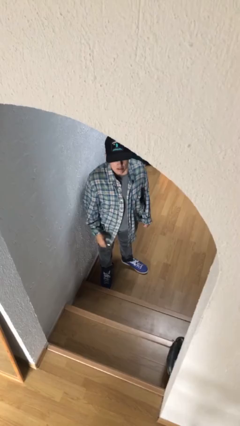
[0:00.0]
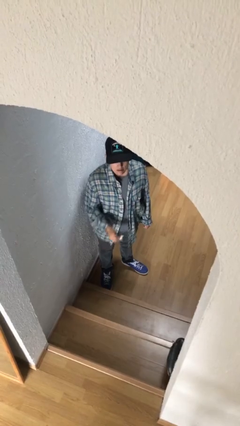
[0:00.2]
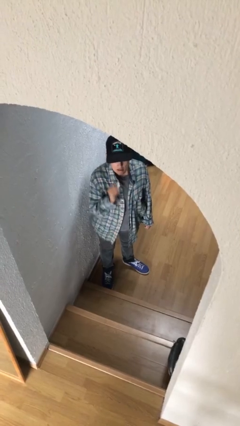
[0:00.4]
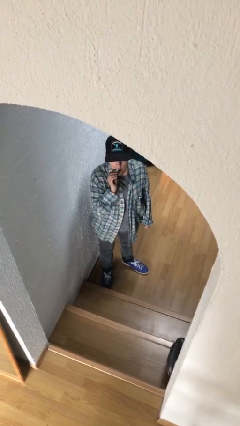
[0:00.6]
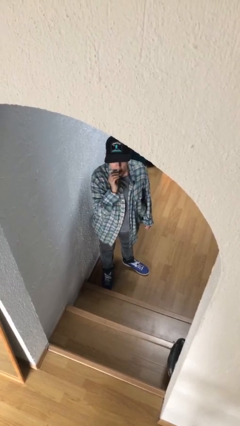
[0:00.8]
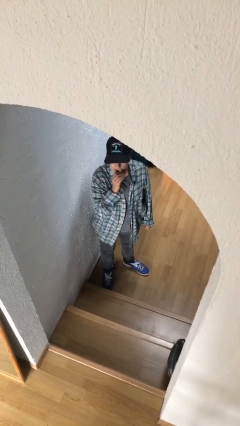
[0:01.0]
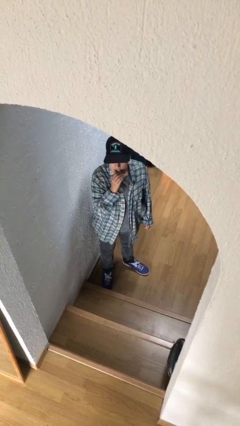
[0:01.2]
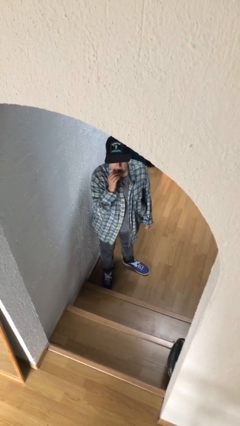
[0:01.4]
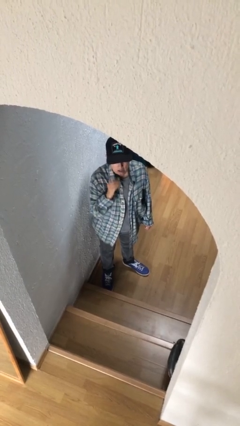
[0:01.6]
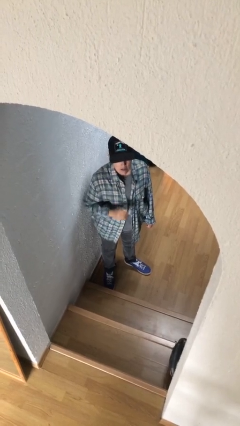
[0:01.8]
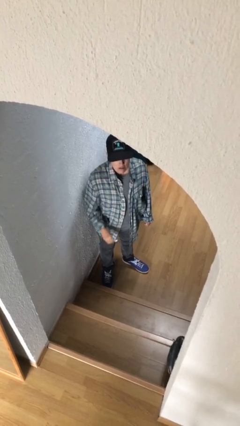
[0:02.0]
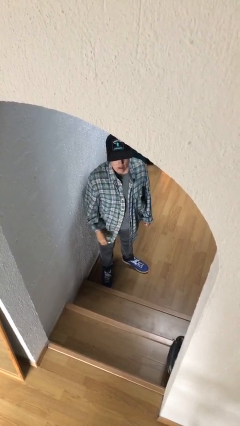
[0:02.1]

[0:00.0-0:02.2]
person applies lip makeup

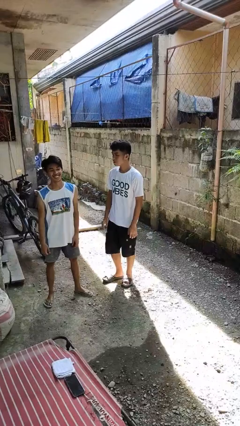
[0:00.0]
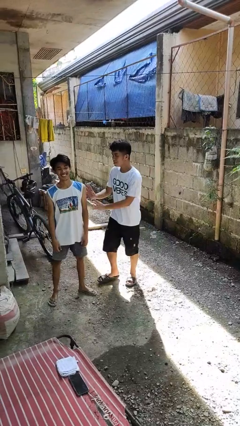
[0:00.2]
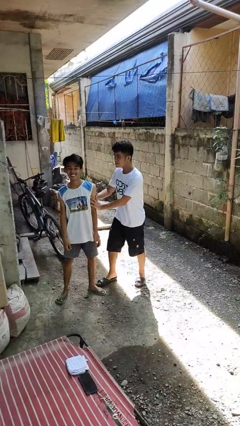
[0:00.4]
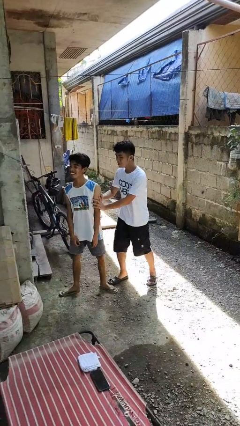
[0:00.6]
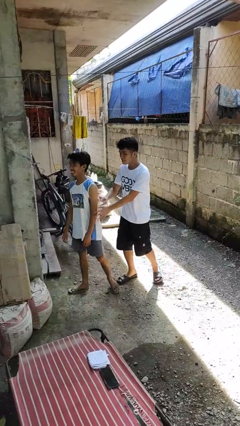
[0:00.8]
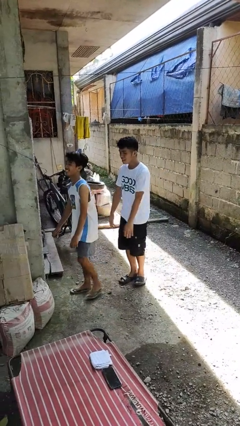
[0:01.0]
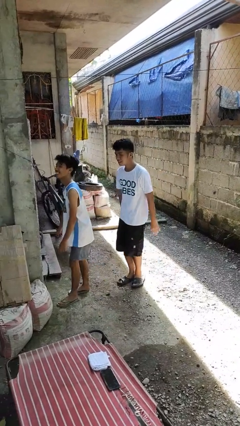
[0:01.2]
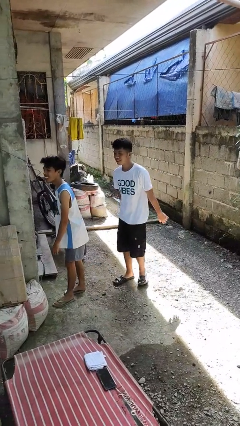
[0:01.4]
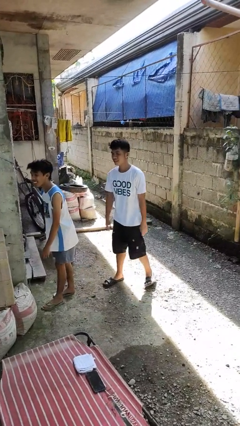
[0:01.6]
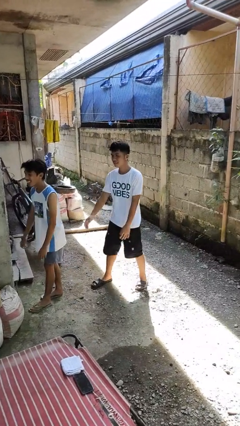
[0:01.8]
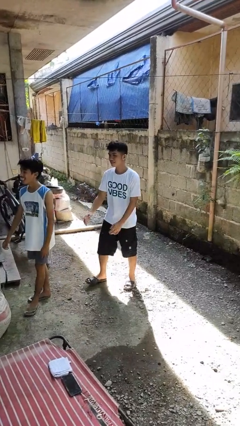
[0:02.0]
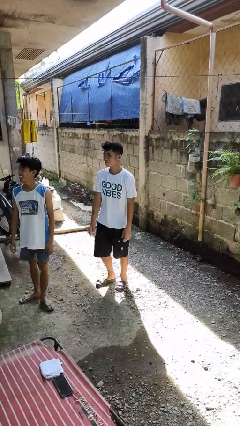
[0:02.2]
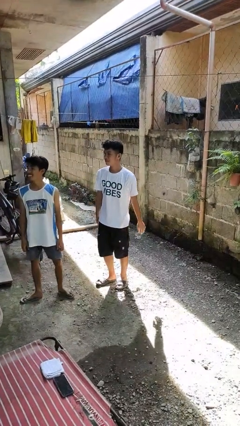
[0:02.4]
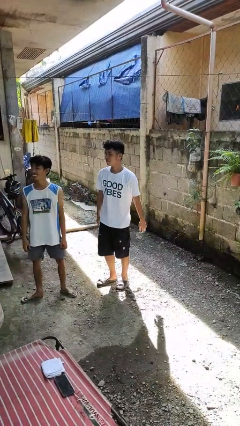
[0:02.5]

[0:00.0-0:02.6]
person shoves person

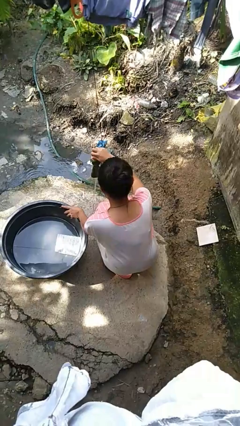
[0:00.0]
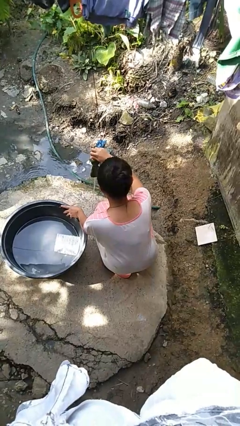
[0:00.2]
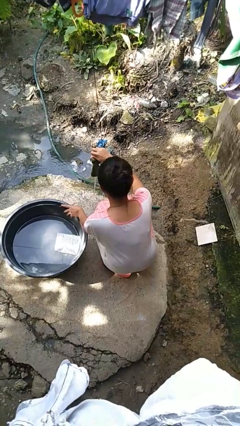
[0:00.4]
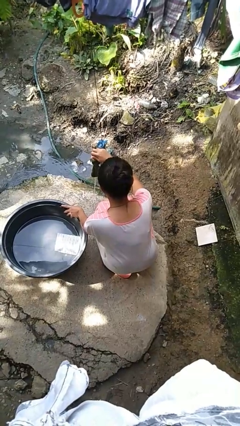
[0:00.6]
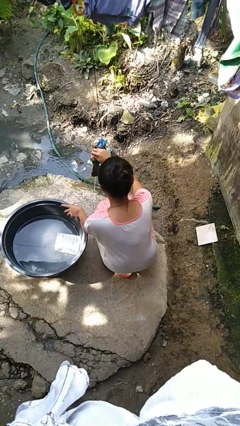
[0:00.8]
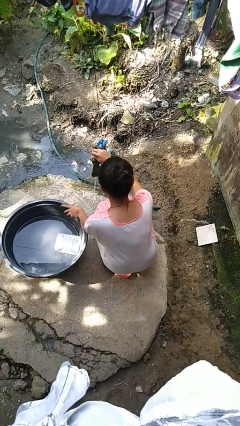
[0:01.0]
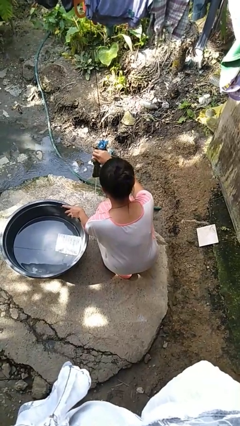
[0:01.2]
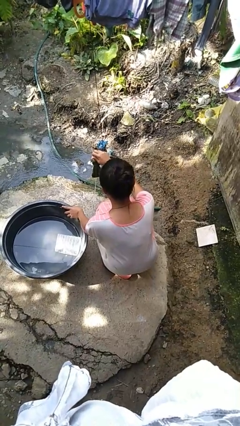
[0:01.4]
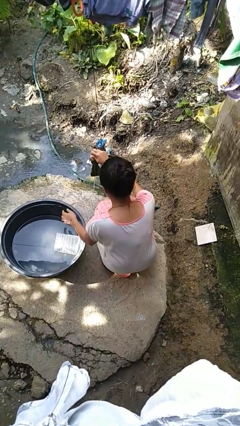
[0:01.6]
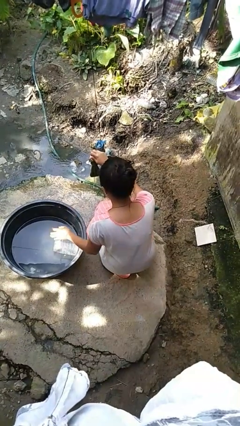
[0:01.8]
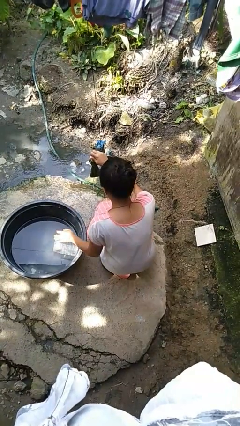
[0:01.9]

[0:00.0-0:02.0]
person turns off faucet

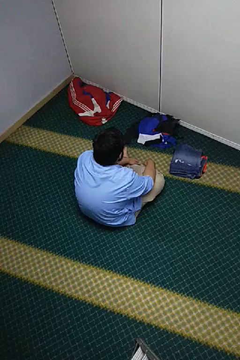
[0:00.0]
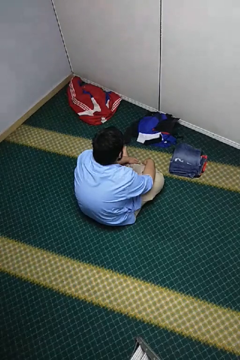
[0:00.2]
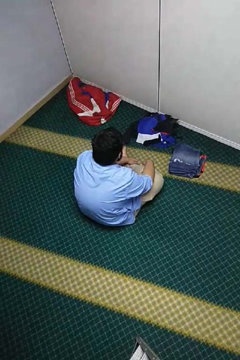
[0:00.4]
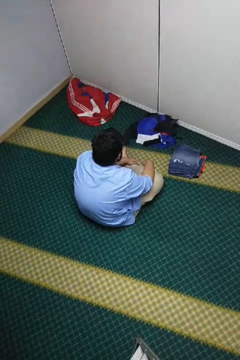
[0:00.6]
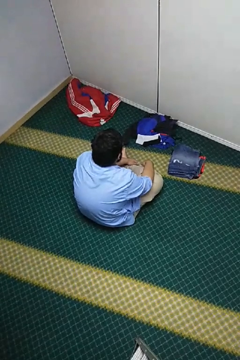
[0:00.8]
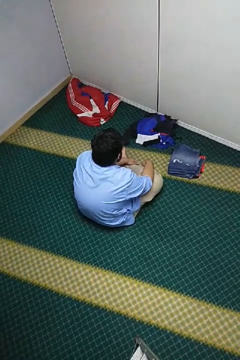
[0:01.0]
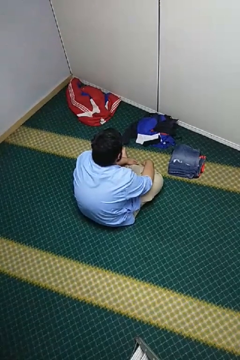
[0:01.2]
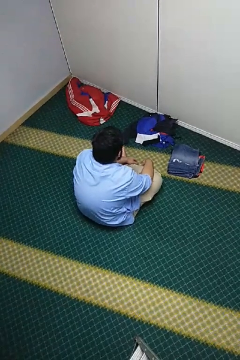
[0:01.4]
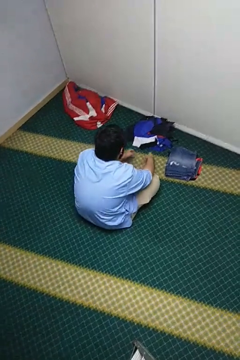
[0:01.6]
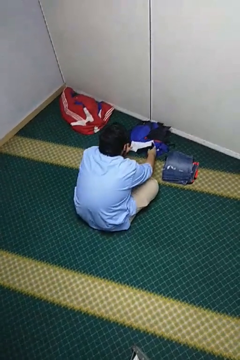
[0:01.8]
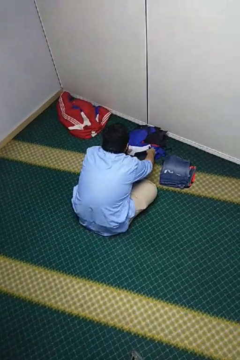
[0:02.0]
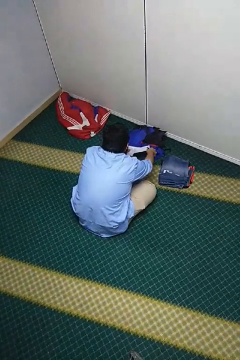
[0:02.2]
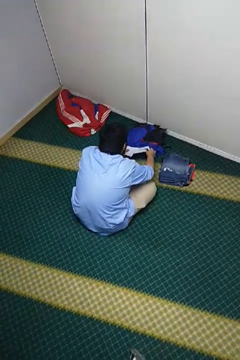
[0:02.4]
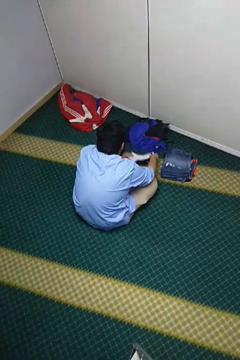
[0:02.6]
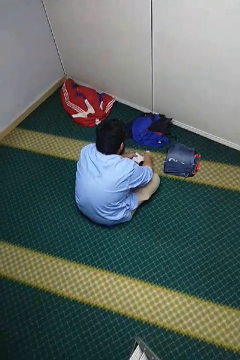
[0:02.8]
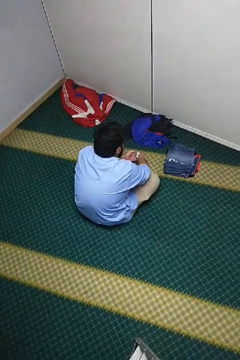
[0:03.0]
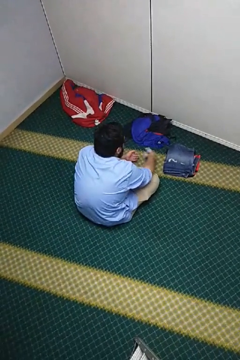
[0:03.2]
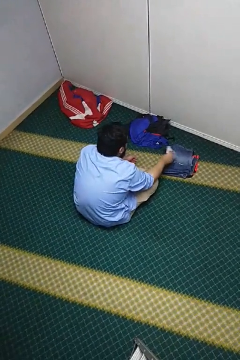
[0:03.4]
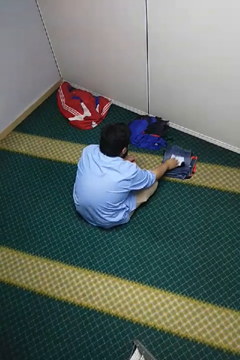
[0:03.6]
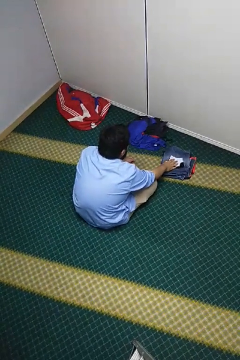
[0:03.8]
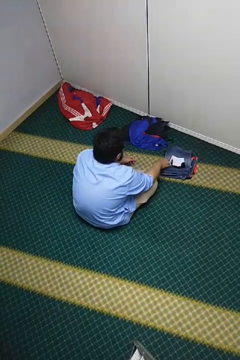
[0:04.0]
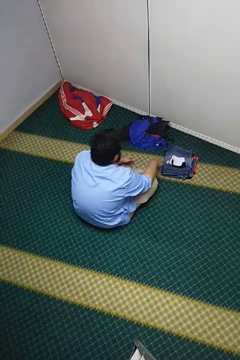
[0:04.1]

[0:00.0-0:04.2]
person folds socks

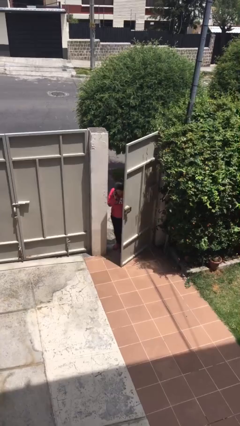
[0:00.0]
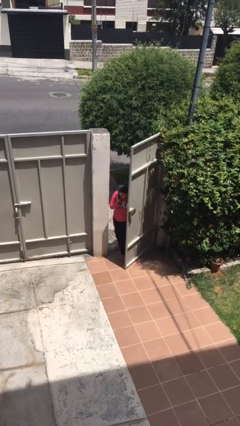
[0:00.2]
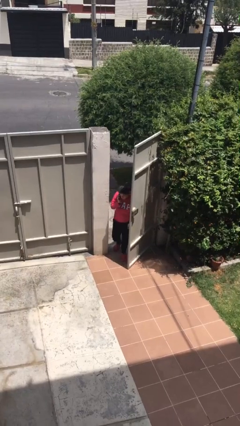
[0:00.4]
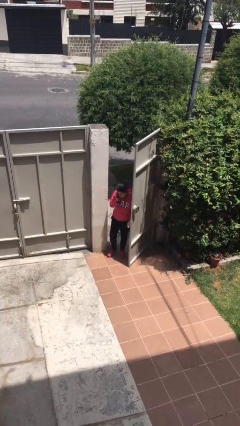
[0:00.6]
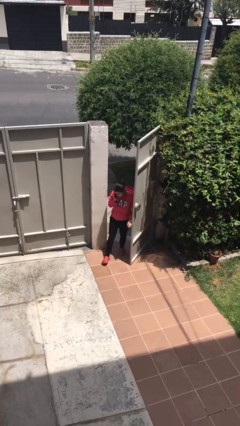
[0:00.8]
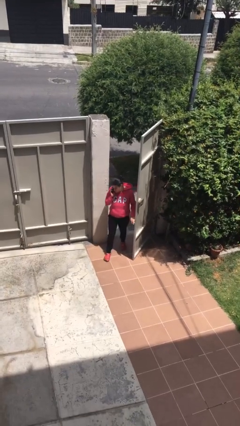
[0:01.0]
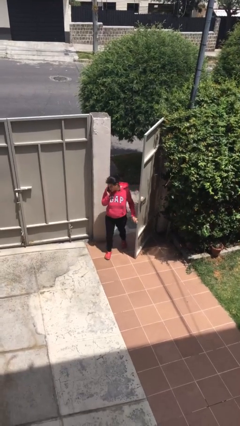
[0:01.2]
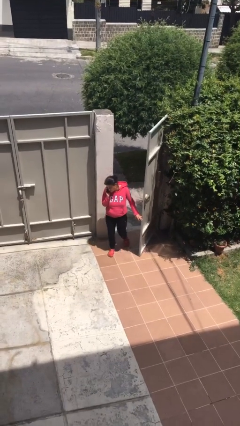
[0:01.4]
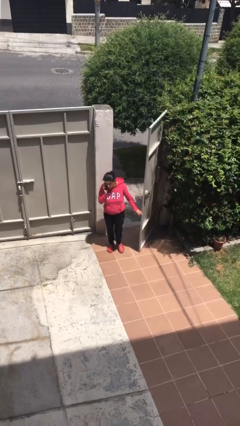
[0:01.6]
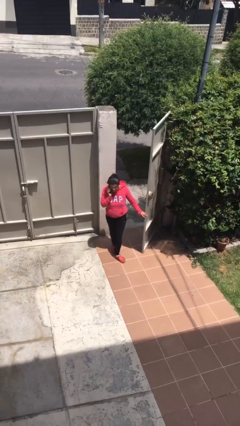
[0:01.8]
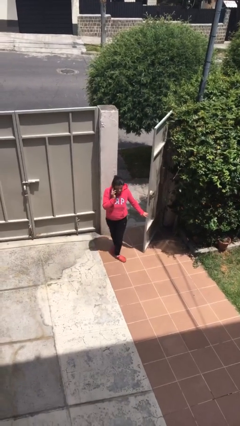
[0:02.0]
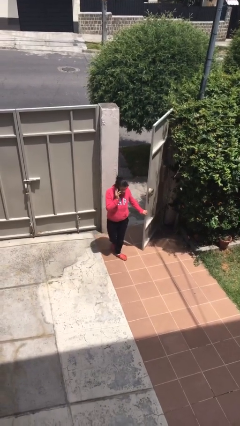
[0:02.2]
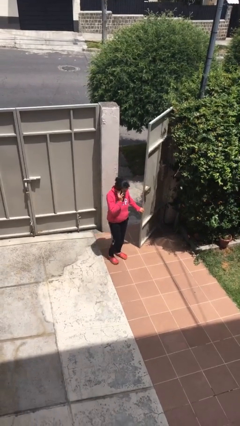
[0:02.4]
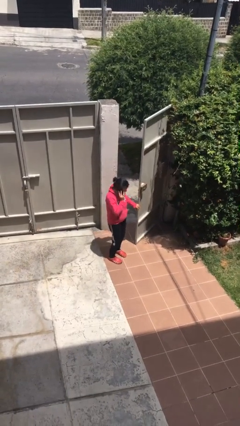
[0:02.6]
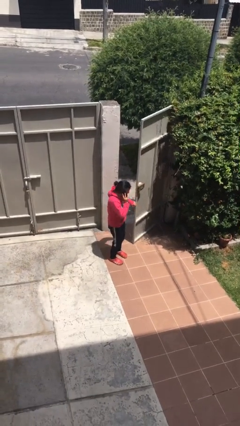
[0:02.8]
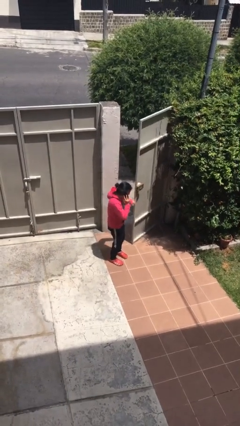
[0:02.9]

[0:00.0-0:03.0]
person enters scene through structure

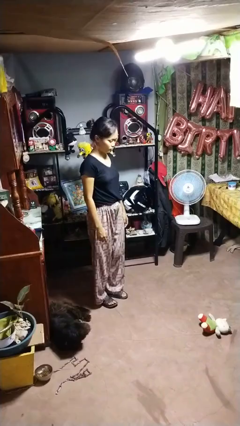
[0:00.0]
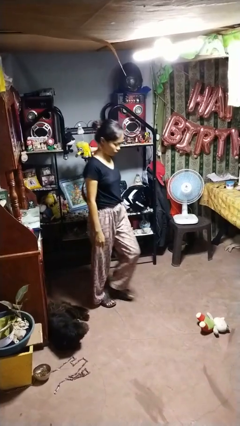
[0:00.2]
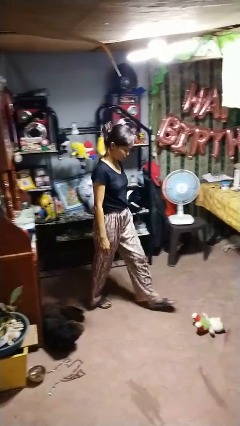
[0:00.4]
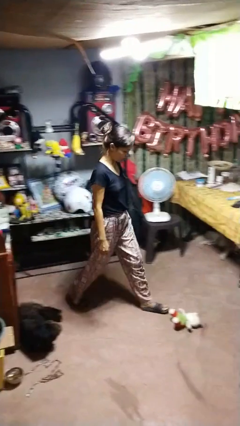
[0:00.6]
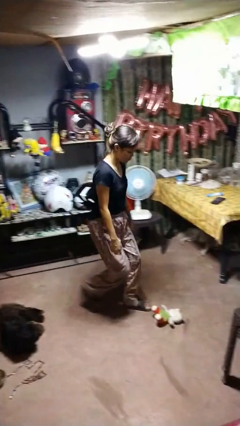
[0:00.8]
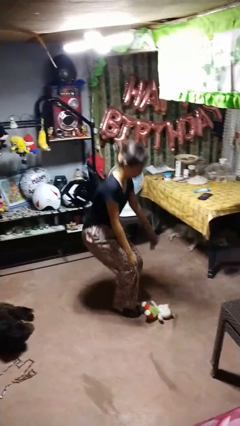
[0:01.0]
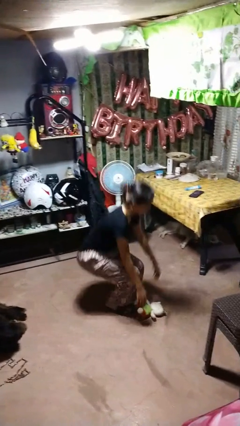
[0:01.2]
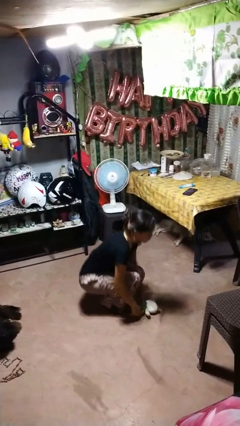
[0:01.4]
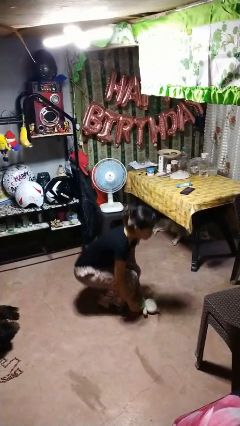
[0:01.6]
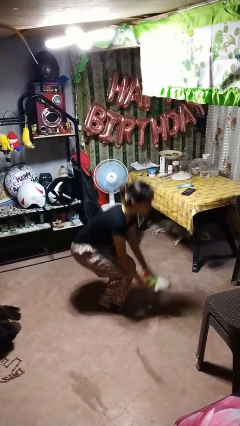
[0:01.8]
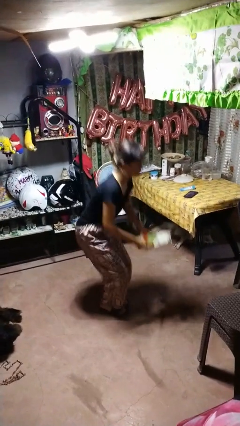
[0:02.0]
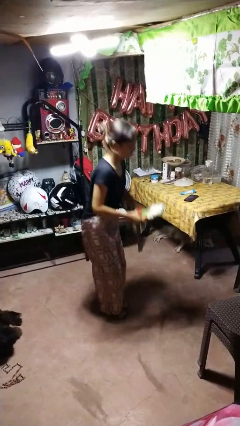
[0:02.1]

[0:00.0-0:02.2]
person picks up object from floor

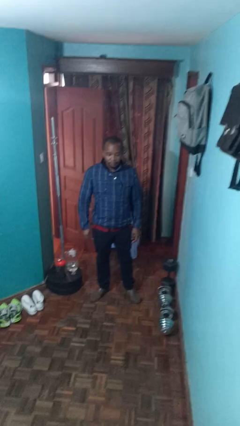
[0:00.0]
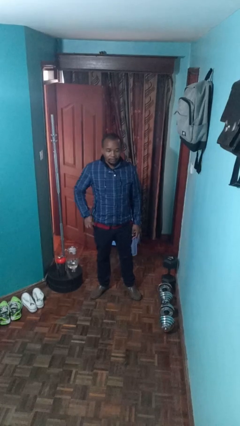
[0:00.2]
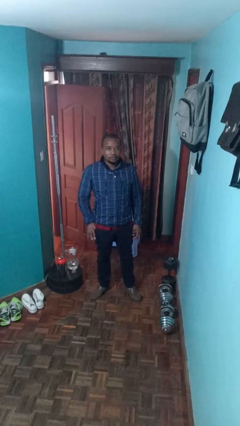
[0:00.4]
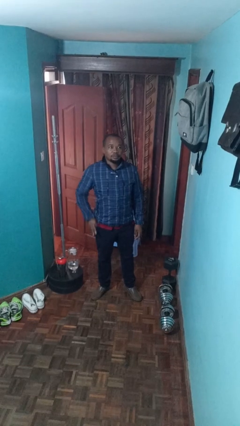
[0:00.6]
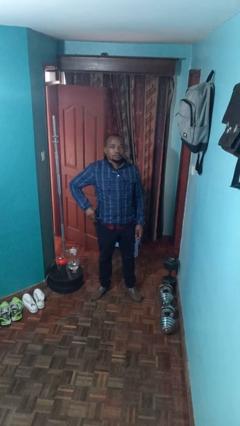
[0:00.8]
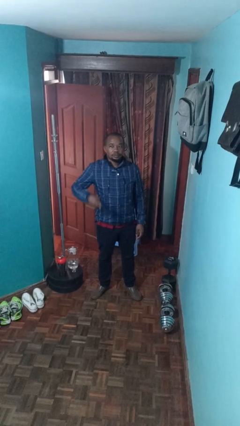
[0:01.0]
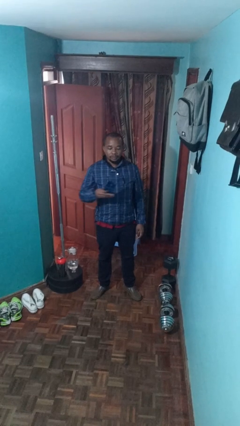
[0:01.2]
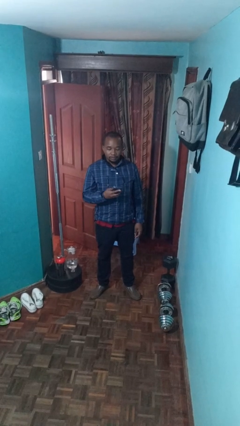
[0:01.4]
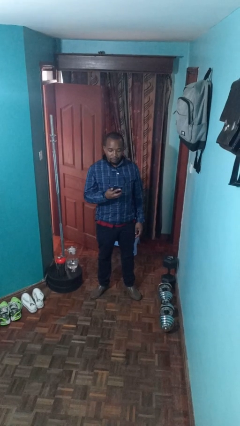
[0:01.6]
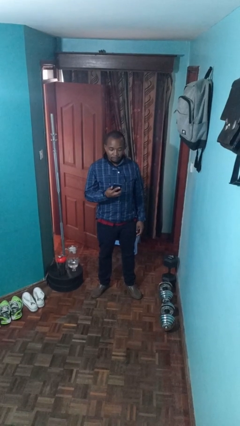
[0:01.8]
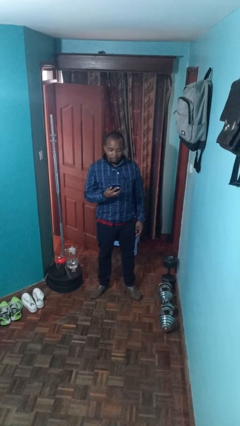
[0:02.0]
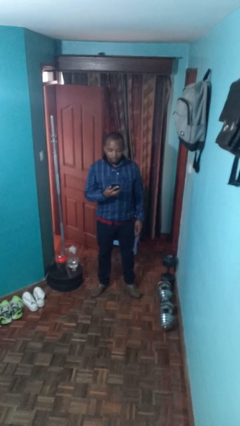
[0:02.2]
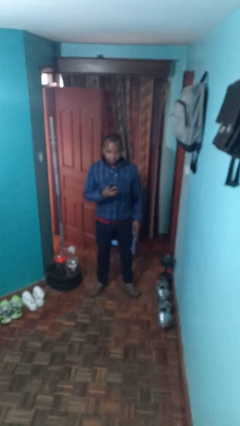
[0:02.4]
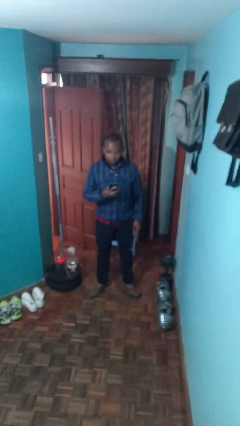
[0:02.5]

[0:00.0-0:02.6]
person takes phone from pocket
